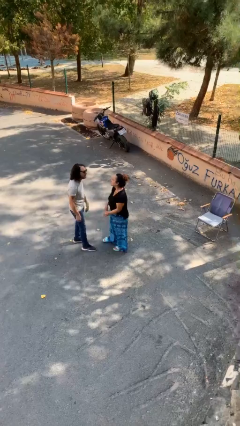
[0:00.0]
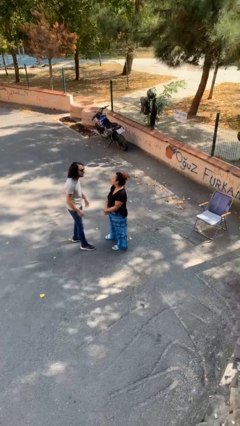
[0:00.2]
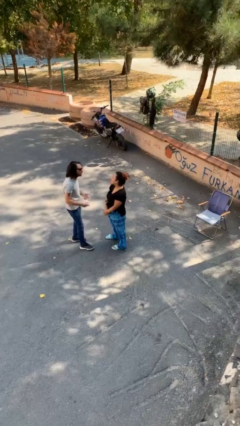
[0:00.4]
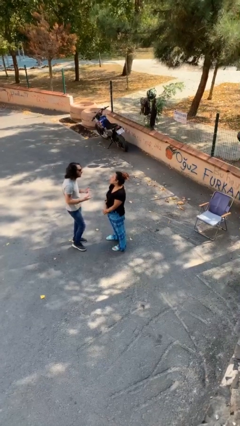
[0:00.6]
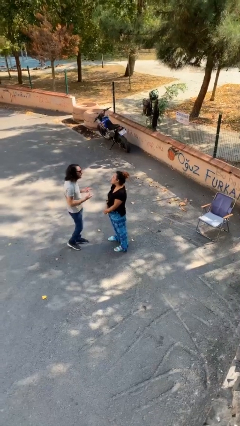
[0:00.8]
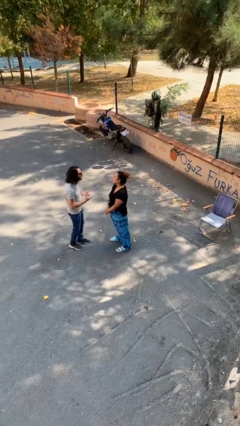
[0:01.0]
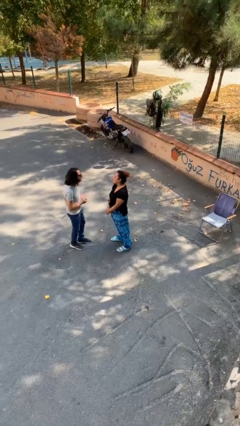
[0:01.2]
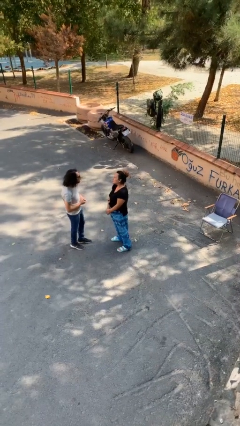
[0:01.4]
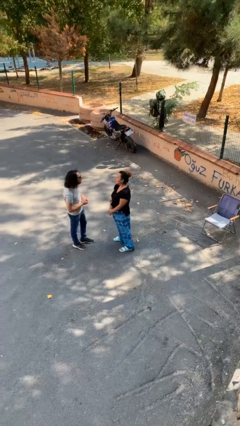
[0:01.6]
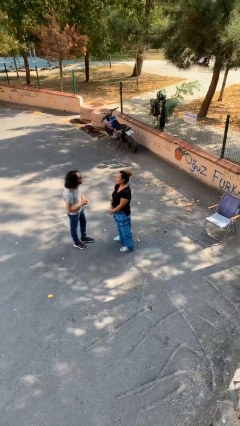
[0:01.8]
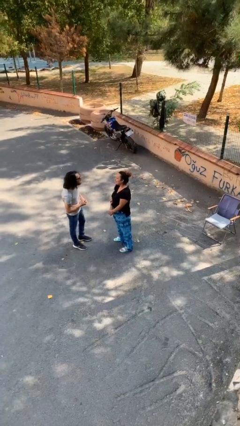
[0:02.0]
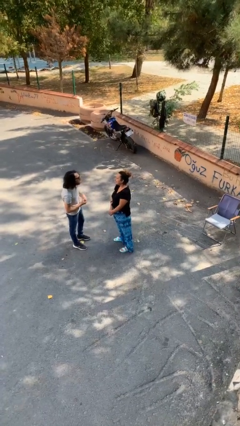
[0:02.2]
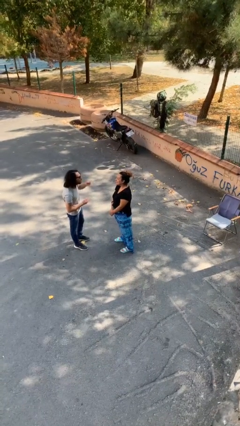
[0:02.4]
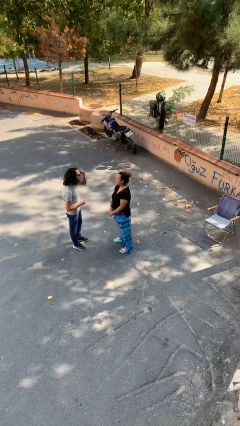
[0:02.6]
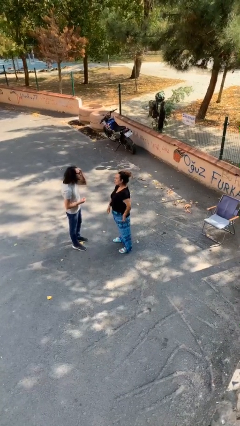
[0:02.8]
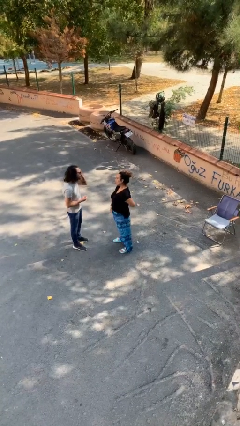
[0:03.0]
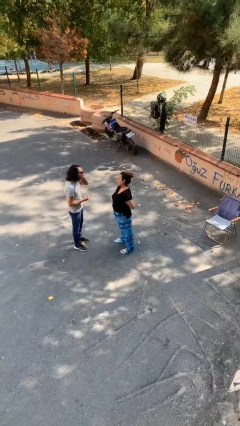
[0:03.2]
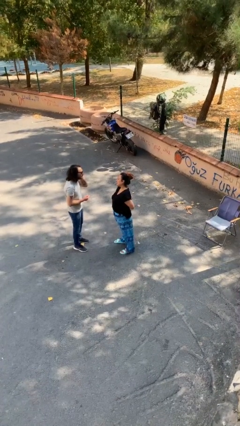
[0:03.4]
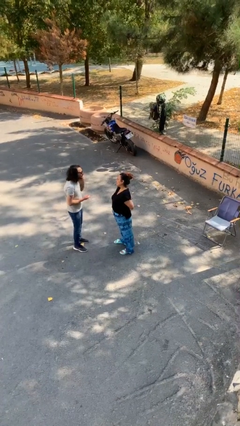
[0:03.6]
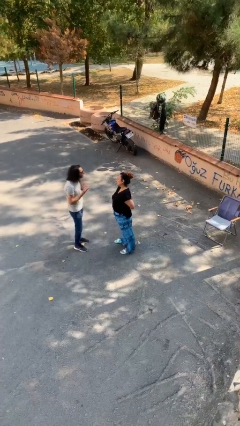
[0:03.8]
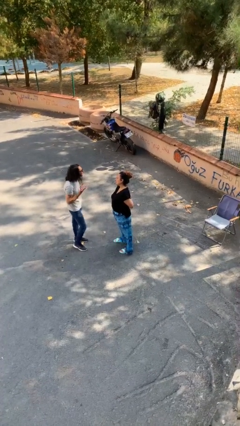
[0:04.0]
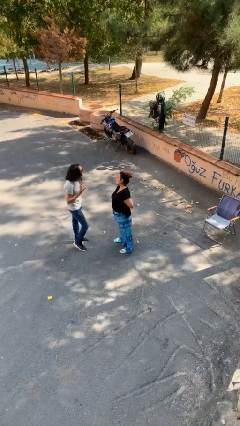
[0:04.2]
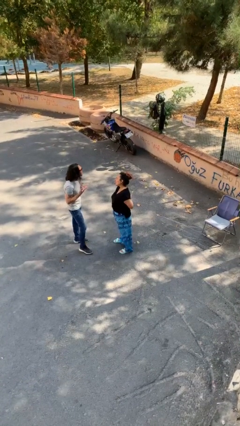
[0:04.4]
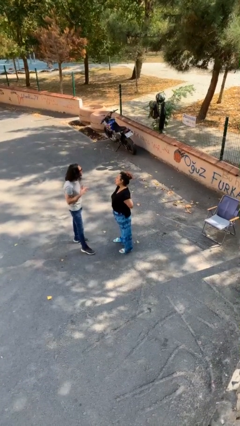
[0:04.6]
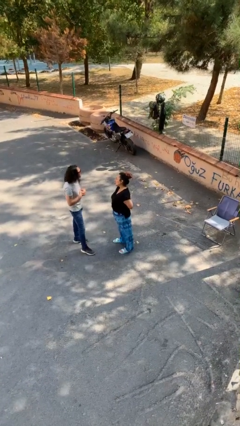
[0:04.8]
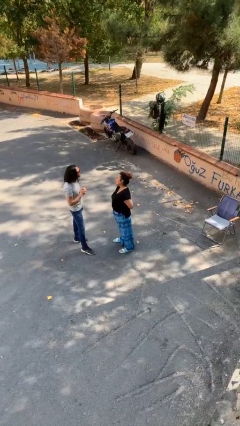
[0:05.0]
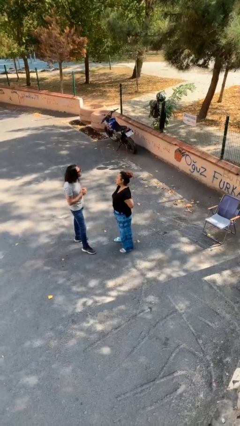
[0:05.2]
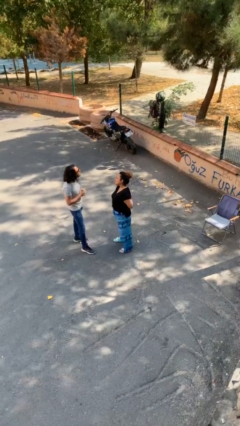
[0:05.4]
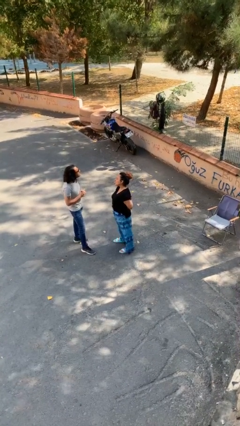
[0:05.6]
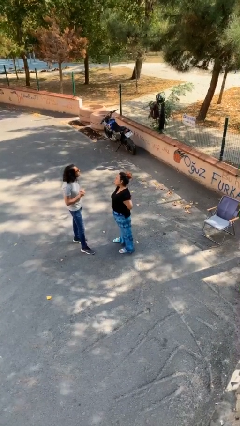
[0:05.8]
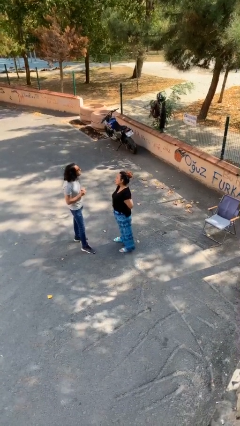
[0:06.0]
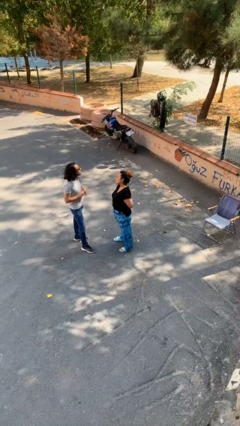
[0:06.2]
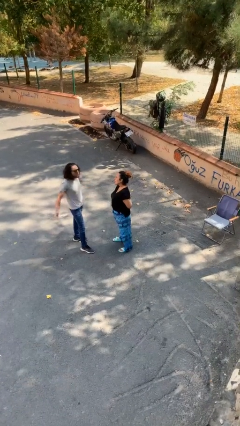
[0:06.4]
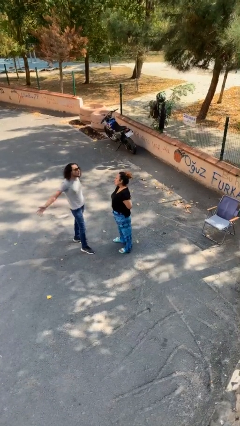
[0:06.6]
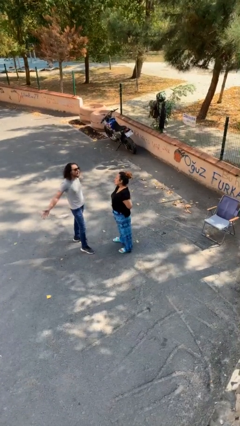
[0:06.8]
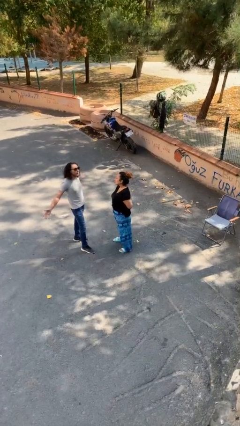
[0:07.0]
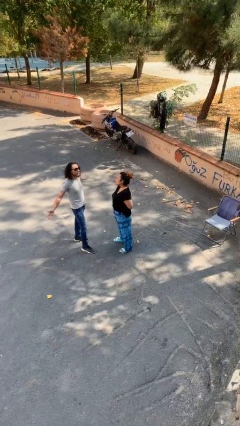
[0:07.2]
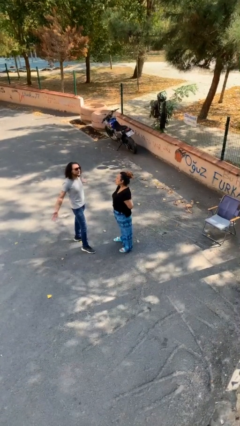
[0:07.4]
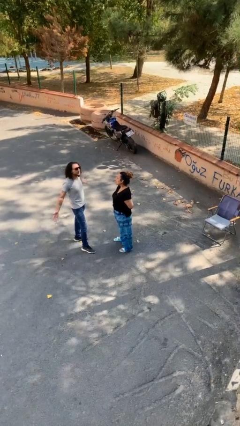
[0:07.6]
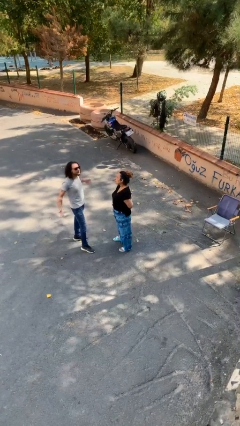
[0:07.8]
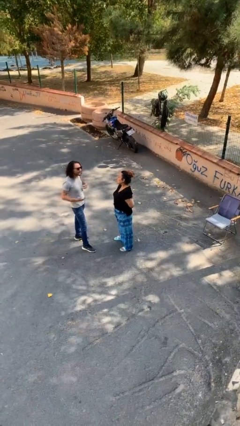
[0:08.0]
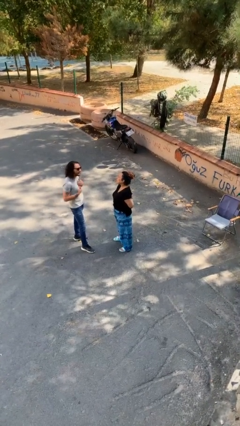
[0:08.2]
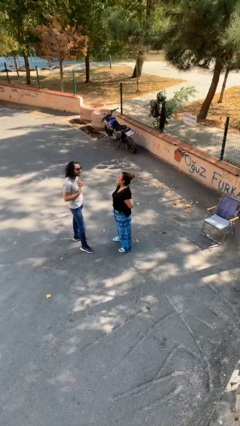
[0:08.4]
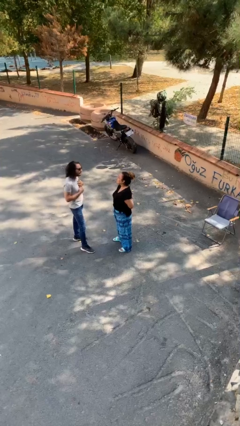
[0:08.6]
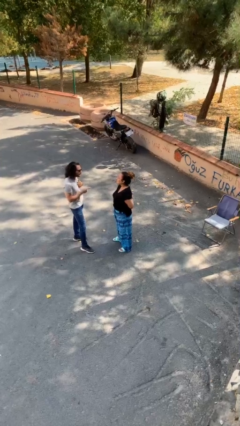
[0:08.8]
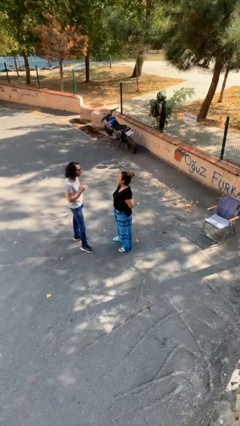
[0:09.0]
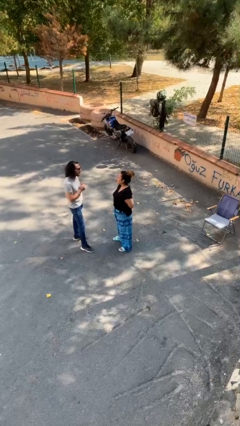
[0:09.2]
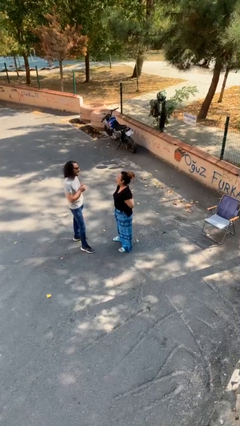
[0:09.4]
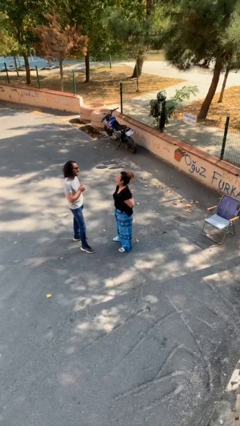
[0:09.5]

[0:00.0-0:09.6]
person talks to person

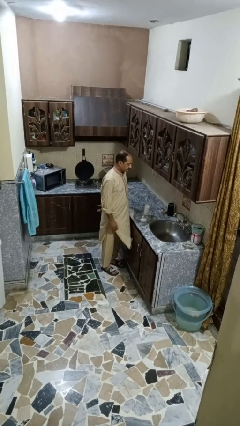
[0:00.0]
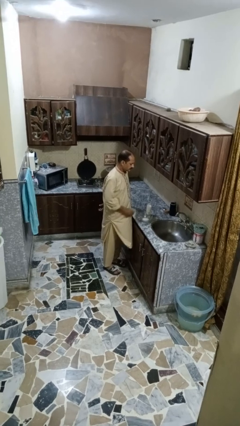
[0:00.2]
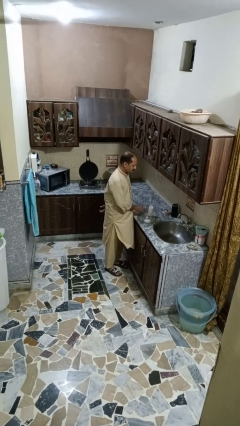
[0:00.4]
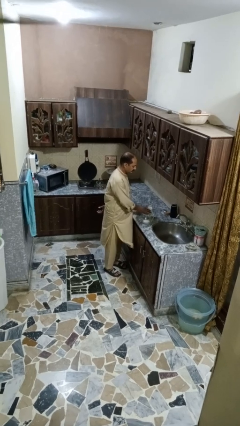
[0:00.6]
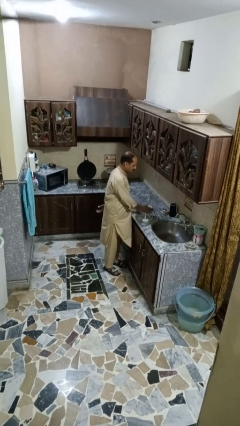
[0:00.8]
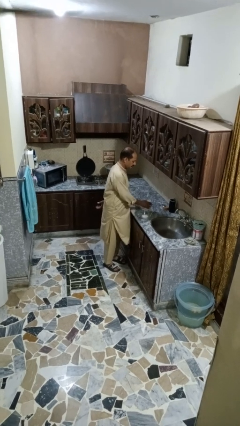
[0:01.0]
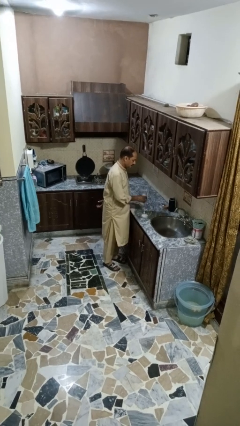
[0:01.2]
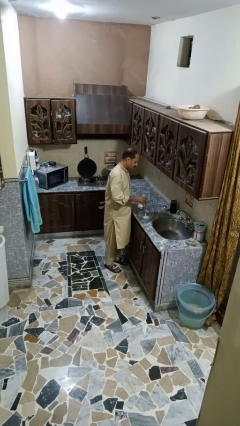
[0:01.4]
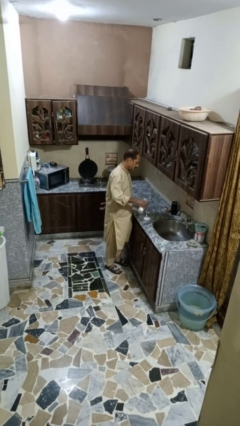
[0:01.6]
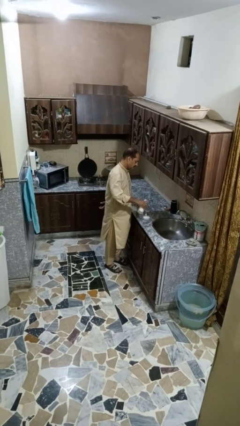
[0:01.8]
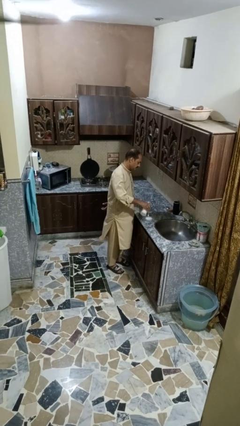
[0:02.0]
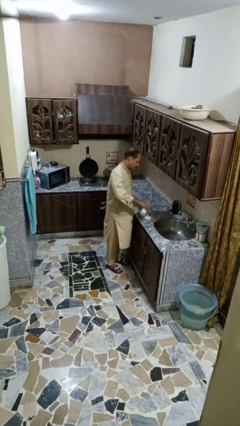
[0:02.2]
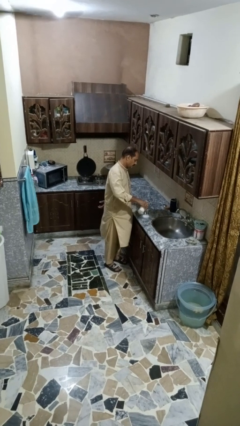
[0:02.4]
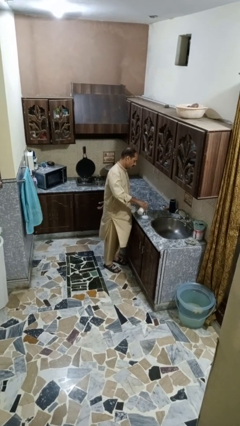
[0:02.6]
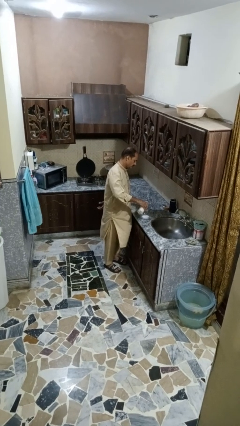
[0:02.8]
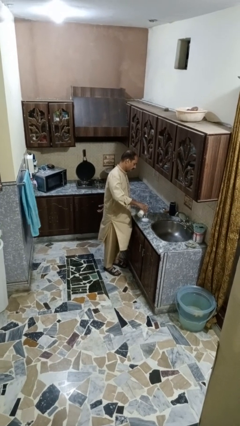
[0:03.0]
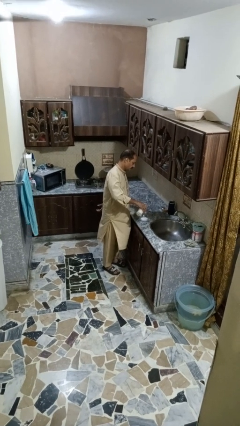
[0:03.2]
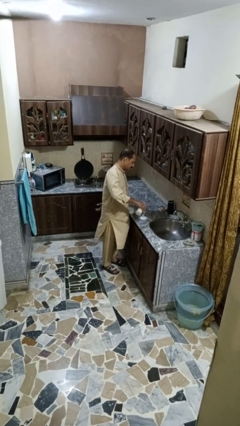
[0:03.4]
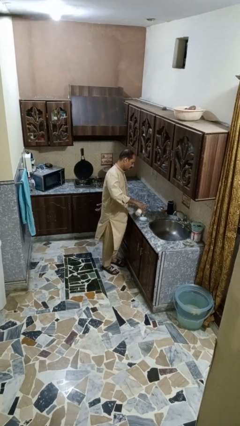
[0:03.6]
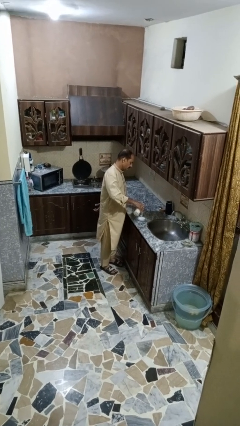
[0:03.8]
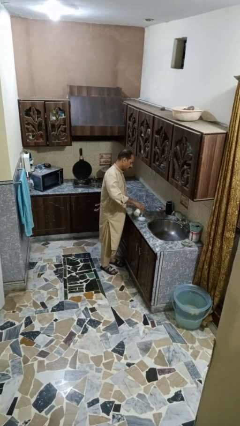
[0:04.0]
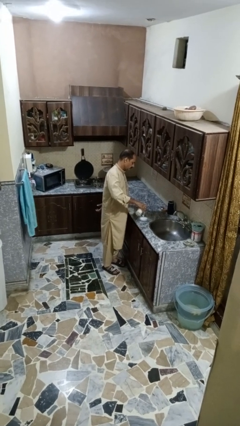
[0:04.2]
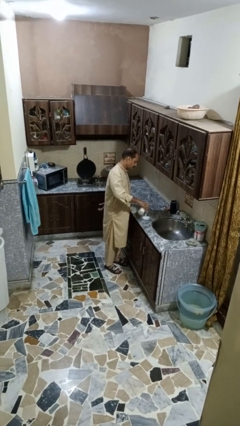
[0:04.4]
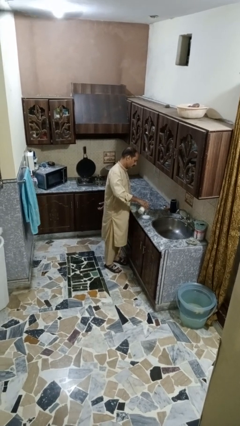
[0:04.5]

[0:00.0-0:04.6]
person pours into bowl

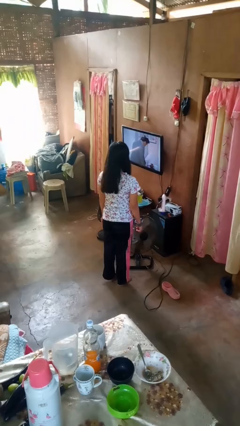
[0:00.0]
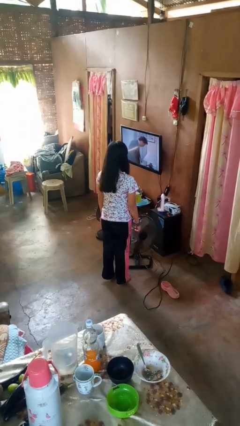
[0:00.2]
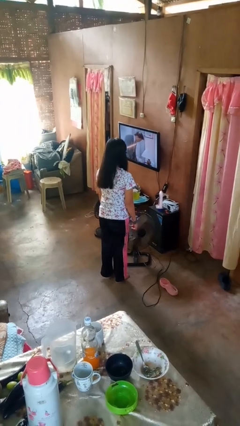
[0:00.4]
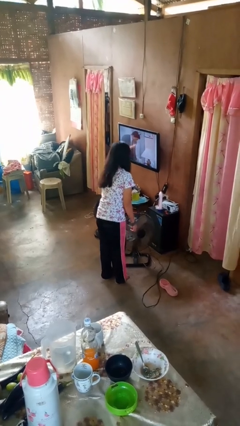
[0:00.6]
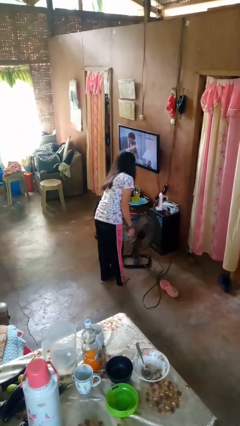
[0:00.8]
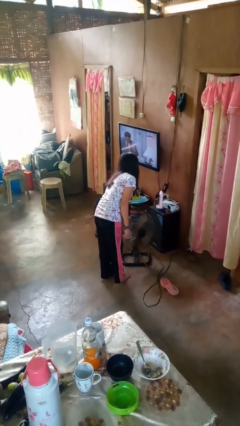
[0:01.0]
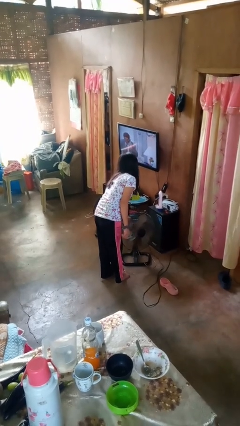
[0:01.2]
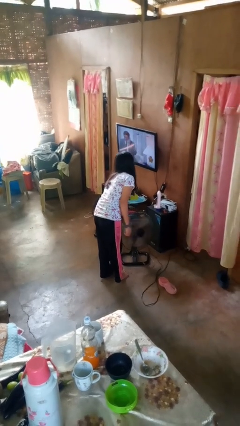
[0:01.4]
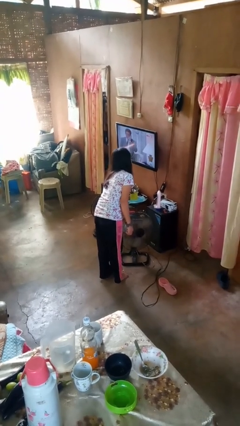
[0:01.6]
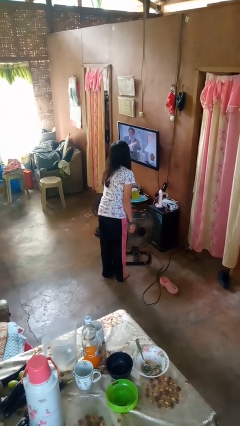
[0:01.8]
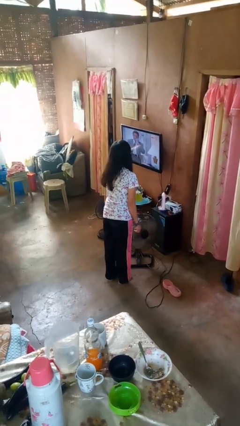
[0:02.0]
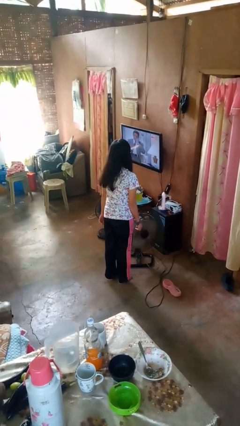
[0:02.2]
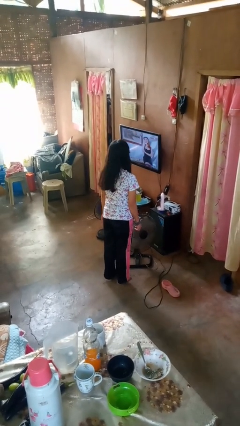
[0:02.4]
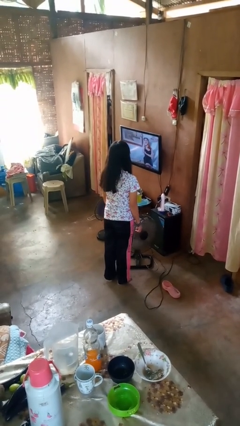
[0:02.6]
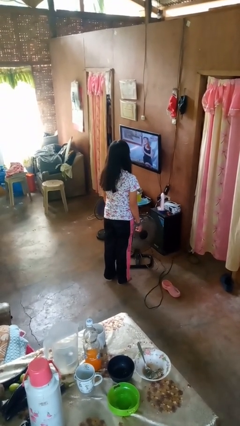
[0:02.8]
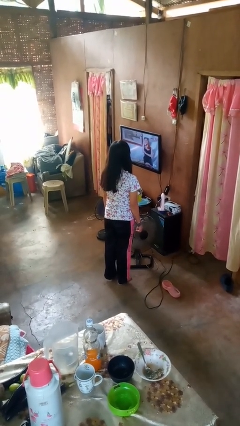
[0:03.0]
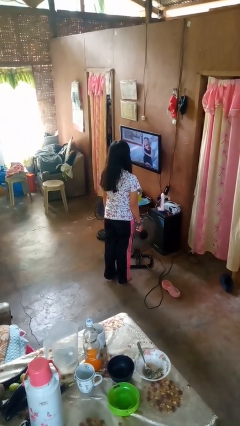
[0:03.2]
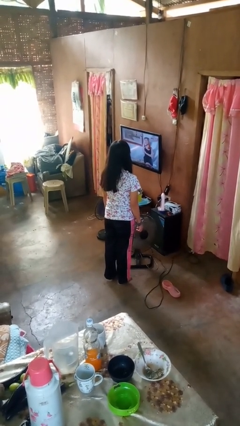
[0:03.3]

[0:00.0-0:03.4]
person turns on fan
